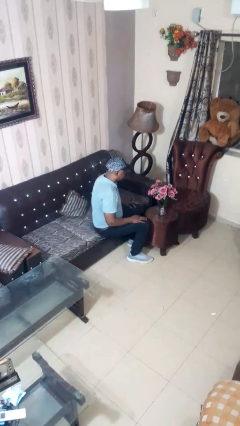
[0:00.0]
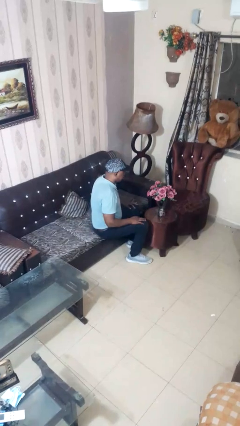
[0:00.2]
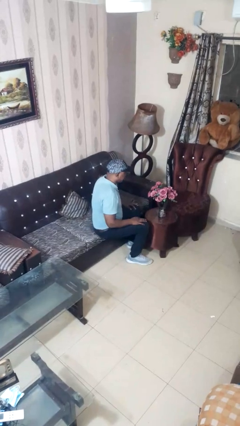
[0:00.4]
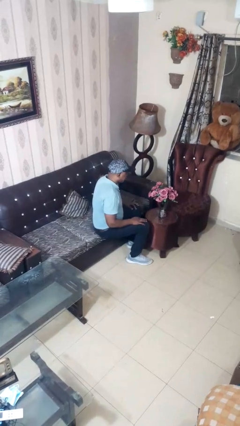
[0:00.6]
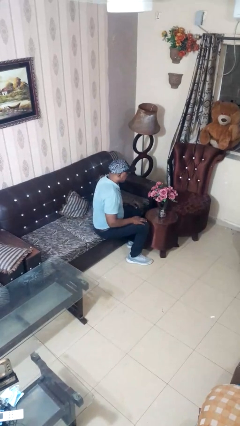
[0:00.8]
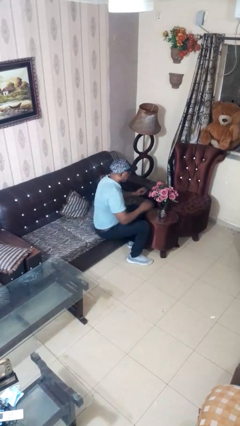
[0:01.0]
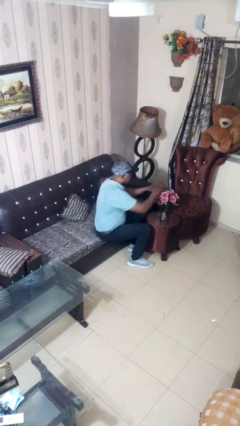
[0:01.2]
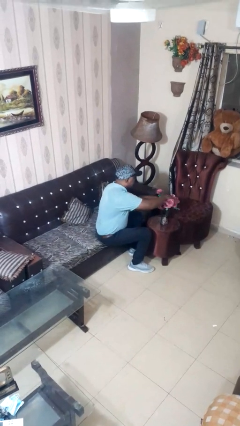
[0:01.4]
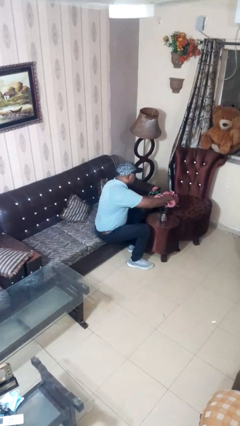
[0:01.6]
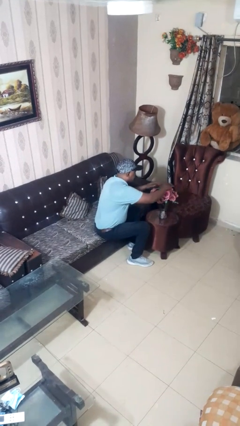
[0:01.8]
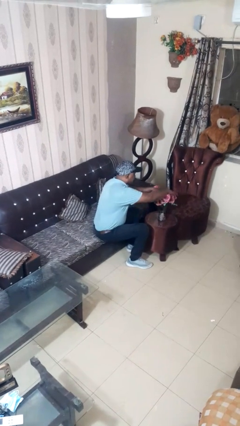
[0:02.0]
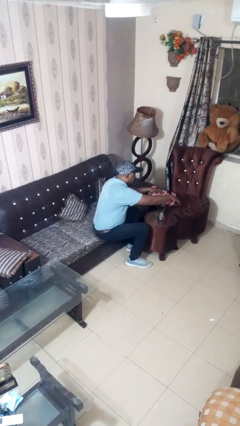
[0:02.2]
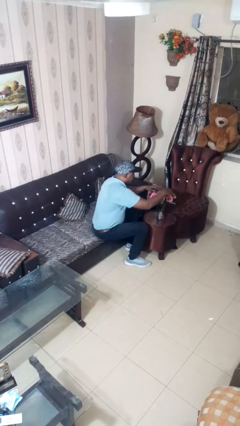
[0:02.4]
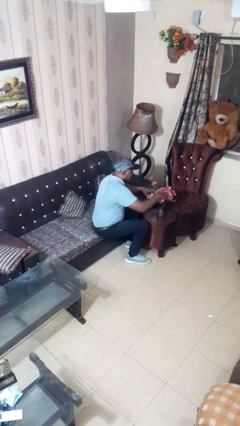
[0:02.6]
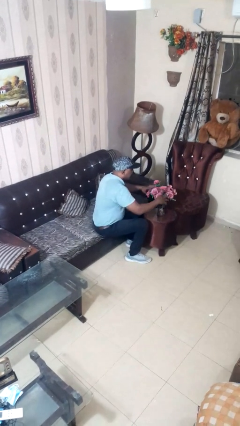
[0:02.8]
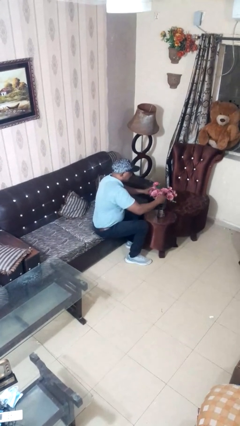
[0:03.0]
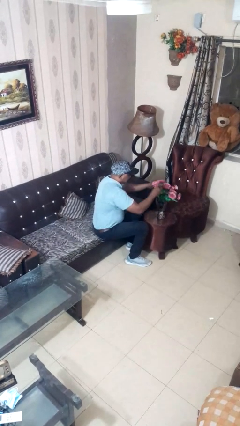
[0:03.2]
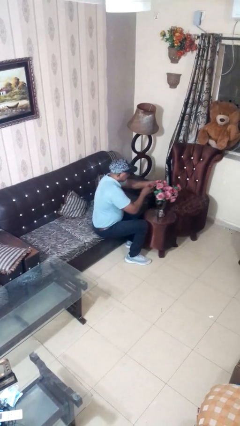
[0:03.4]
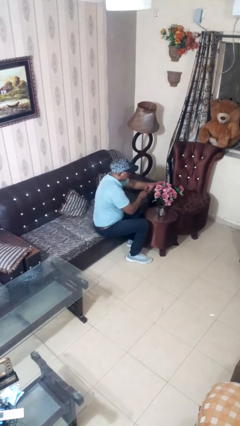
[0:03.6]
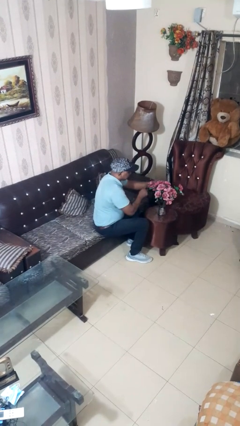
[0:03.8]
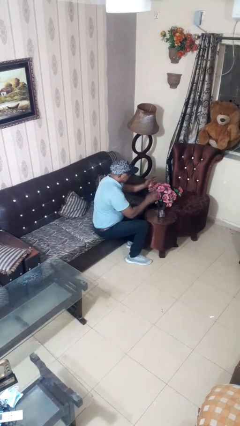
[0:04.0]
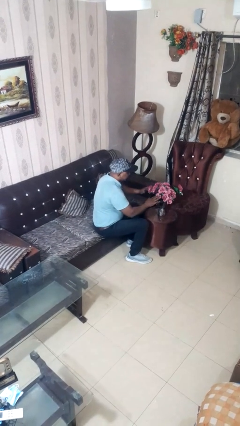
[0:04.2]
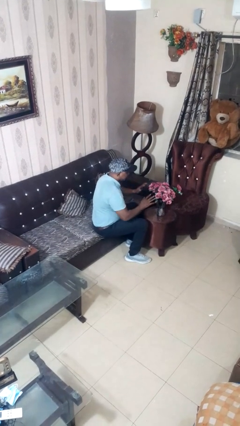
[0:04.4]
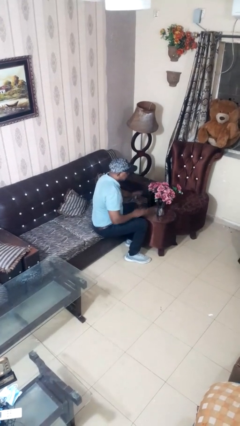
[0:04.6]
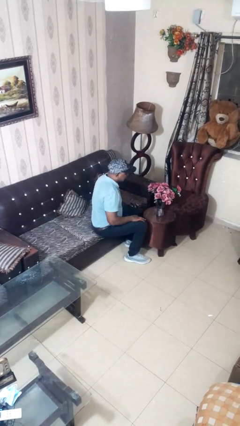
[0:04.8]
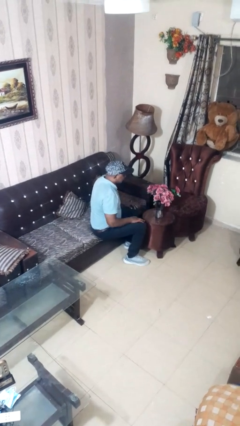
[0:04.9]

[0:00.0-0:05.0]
person arranges flowers in vase

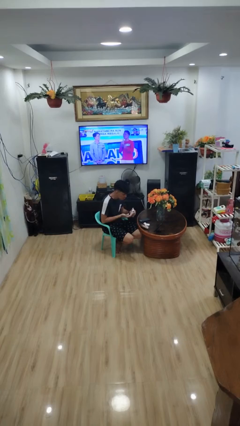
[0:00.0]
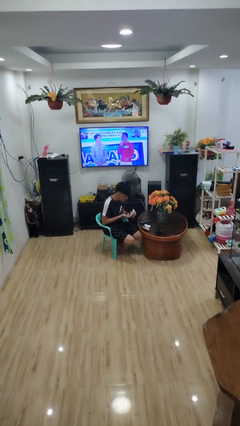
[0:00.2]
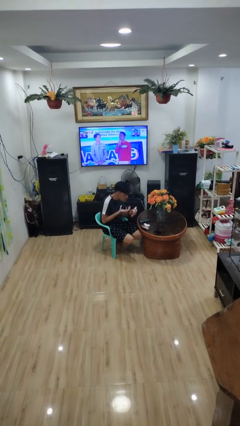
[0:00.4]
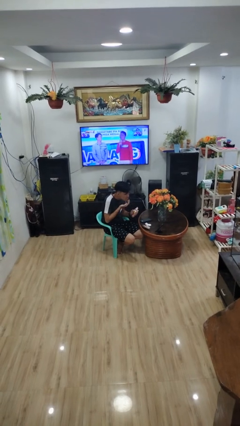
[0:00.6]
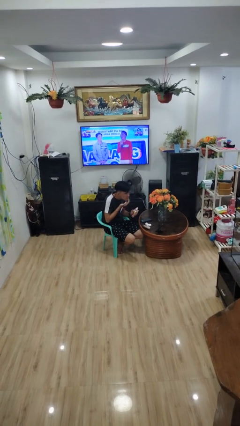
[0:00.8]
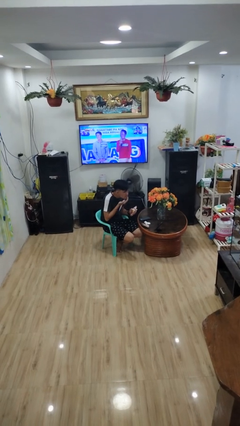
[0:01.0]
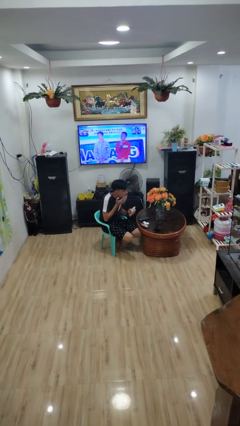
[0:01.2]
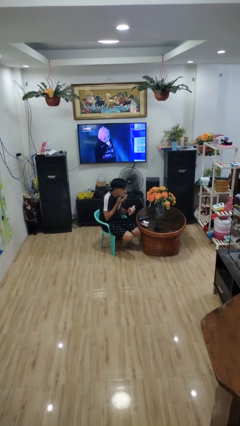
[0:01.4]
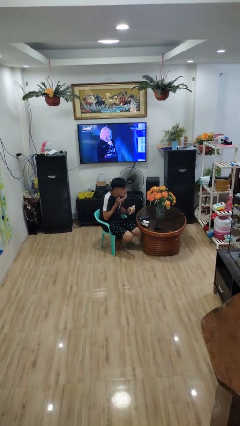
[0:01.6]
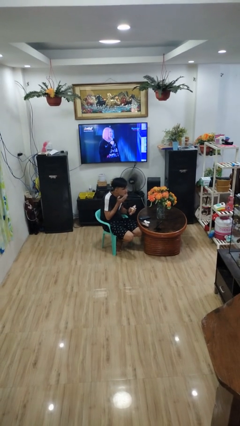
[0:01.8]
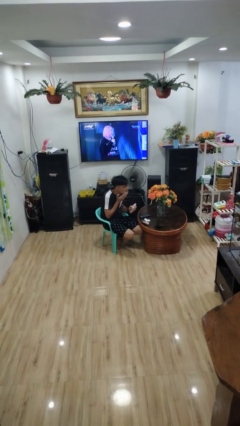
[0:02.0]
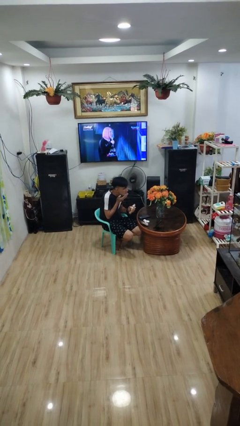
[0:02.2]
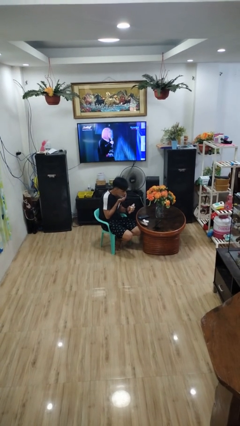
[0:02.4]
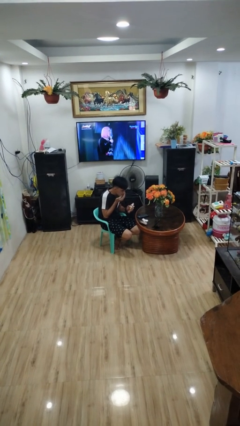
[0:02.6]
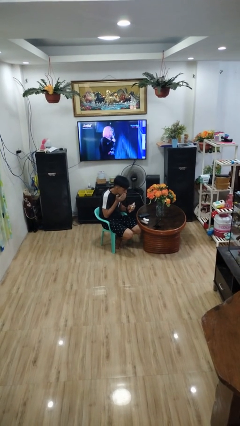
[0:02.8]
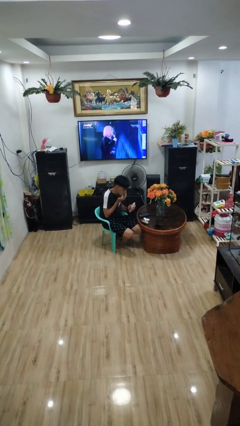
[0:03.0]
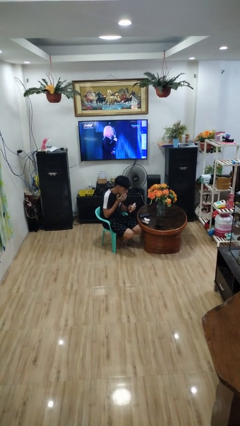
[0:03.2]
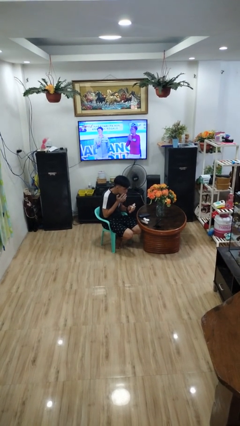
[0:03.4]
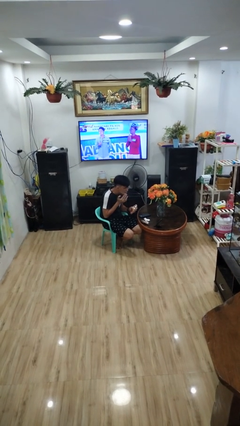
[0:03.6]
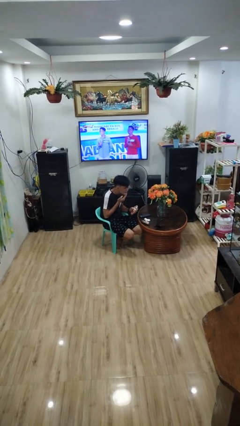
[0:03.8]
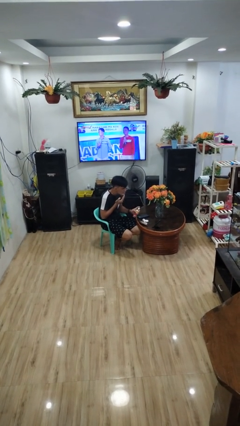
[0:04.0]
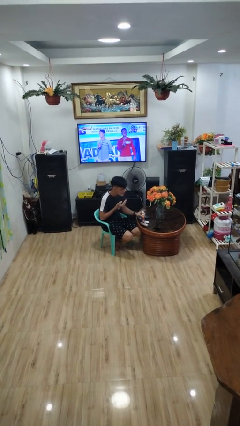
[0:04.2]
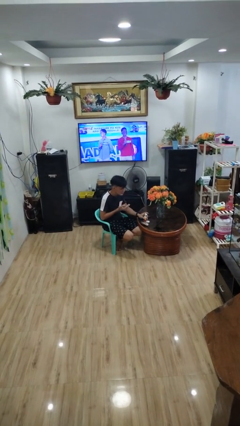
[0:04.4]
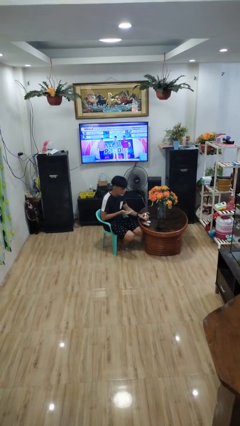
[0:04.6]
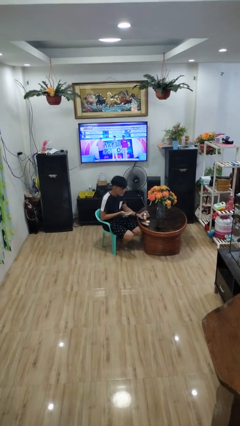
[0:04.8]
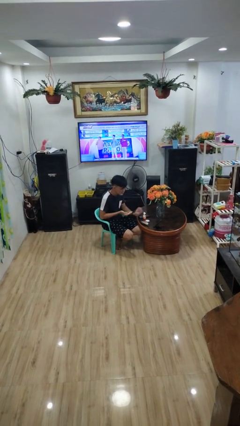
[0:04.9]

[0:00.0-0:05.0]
person applies shaving cream

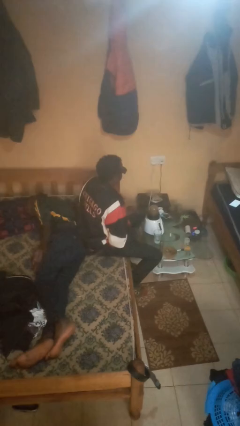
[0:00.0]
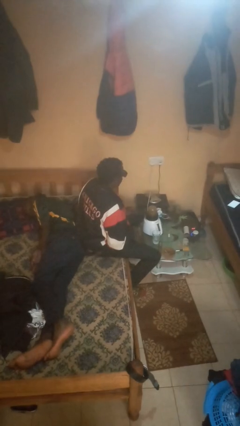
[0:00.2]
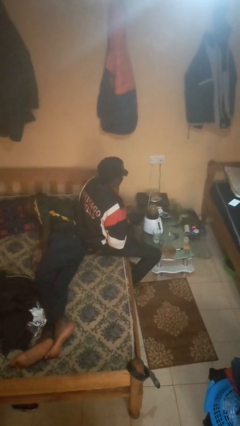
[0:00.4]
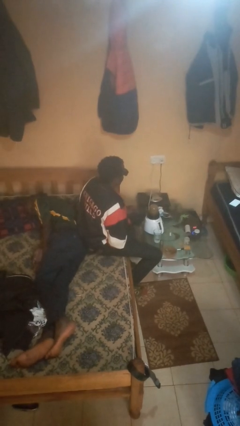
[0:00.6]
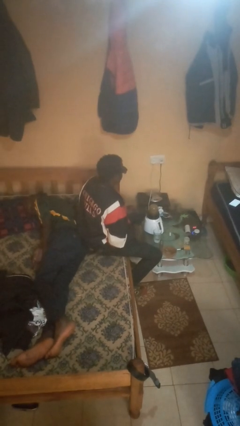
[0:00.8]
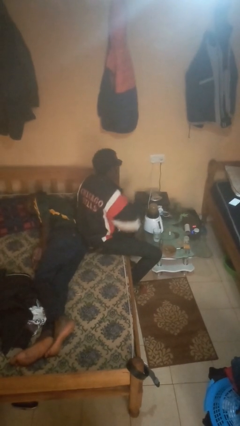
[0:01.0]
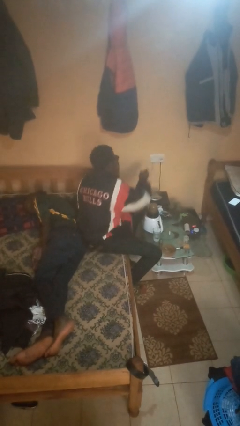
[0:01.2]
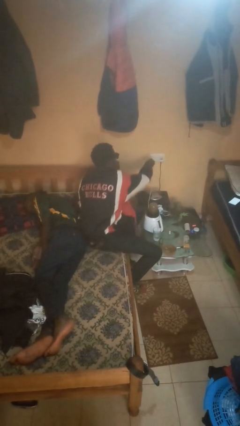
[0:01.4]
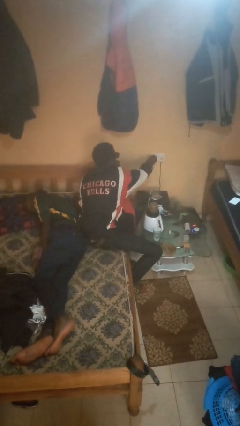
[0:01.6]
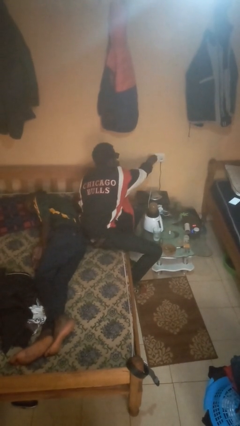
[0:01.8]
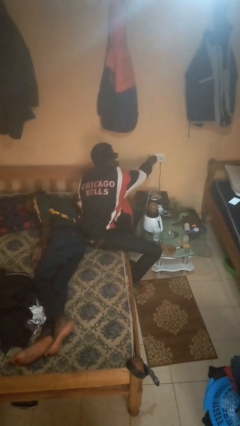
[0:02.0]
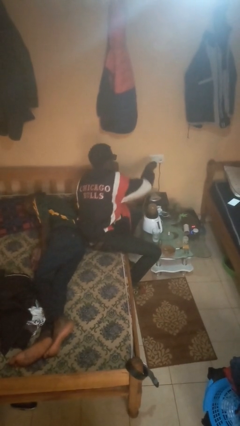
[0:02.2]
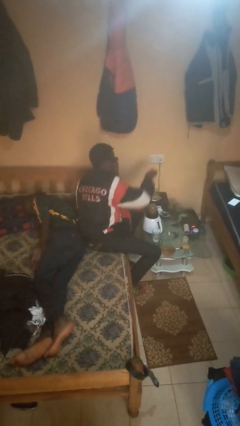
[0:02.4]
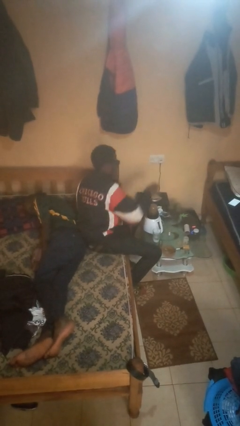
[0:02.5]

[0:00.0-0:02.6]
person unplugs from electrical socket

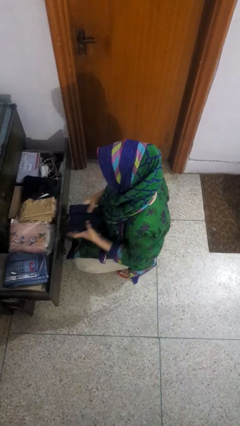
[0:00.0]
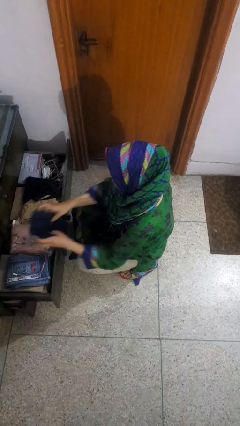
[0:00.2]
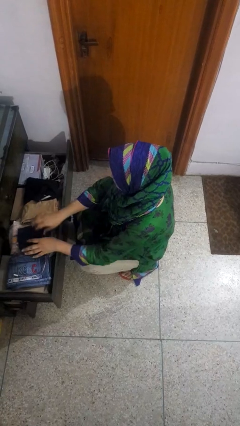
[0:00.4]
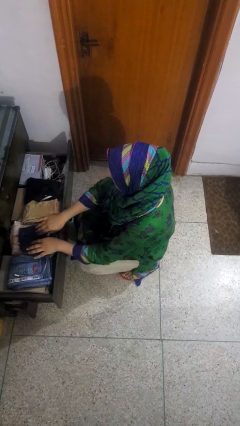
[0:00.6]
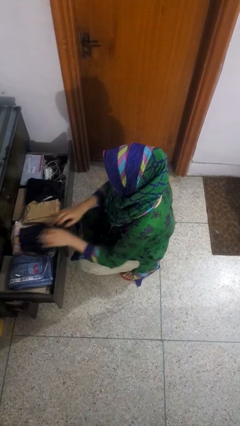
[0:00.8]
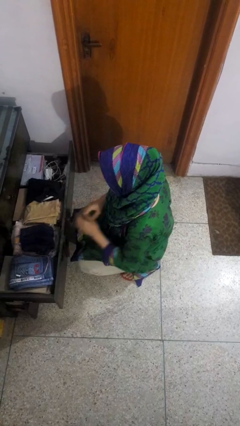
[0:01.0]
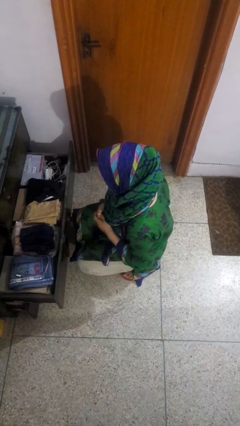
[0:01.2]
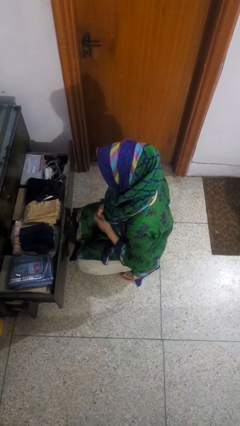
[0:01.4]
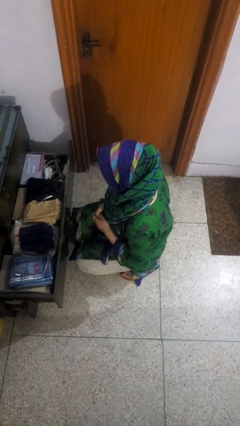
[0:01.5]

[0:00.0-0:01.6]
person puts clothes into dresser

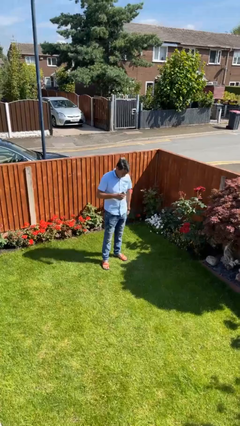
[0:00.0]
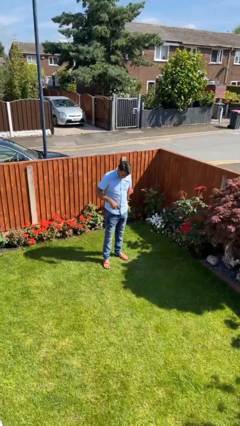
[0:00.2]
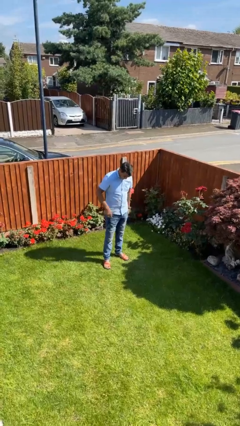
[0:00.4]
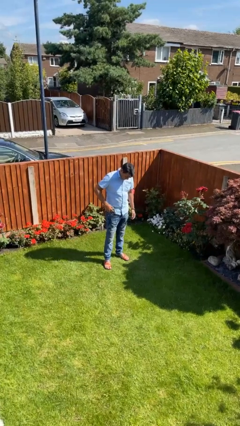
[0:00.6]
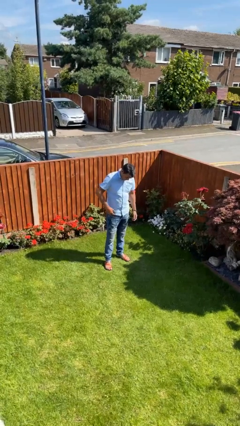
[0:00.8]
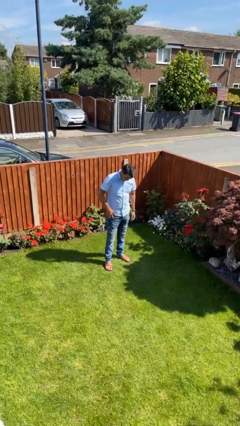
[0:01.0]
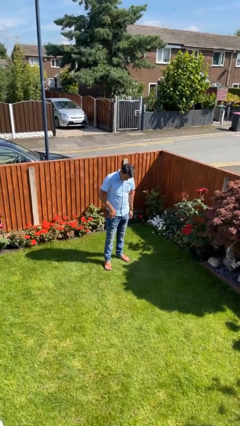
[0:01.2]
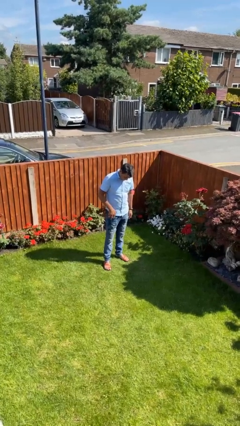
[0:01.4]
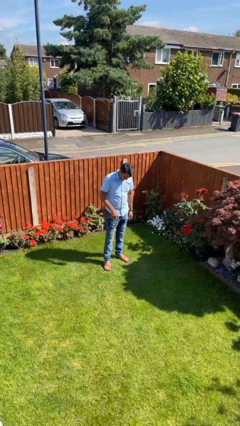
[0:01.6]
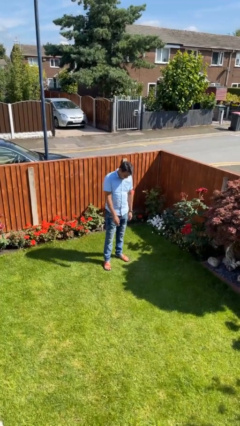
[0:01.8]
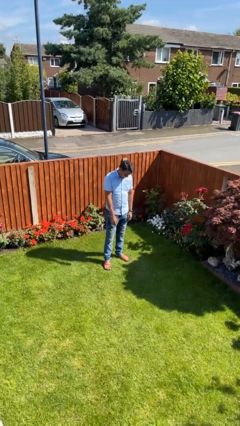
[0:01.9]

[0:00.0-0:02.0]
person puts phone into pocket

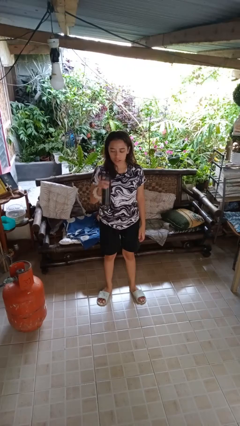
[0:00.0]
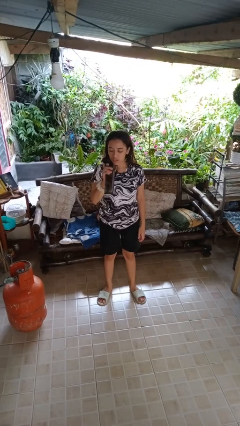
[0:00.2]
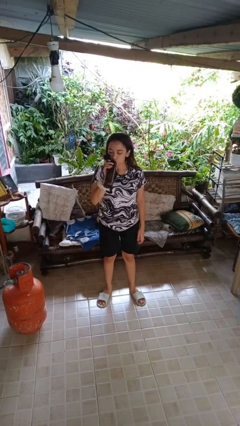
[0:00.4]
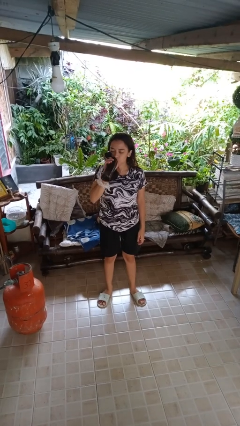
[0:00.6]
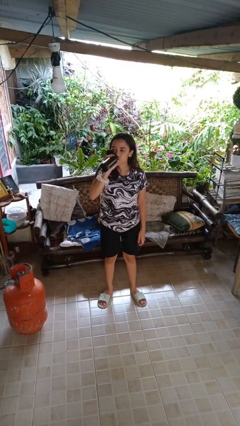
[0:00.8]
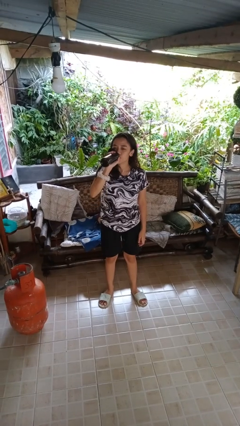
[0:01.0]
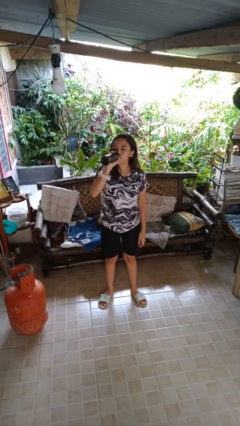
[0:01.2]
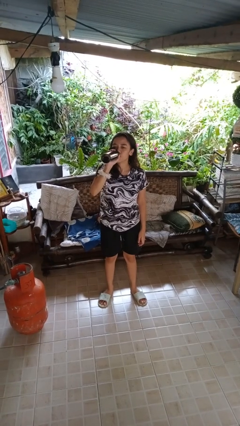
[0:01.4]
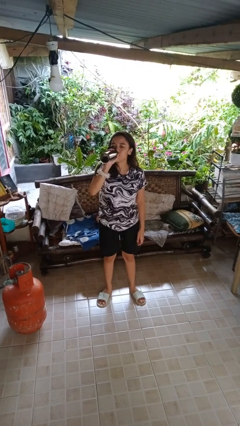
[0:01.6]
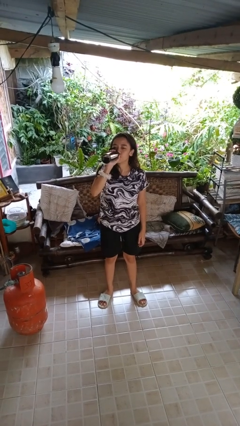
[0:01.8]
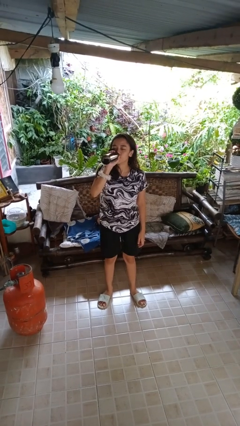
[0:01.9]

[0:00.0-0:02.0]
person drinks from bottle
